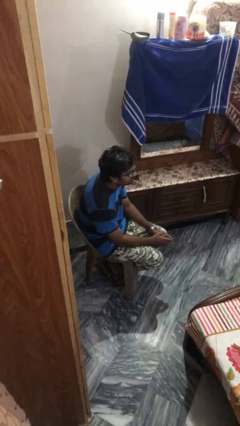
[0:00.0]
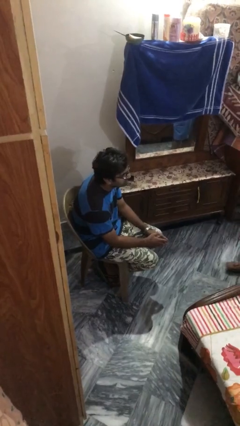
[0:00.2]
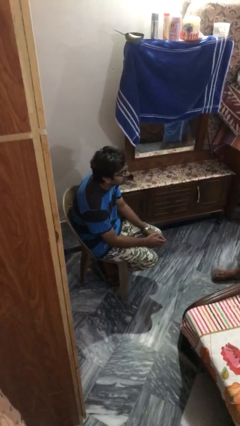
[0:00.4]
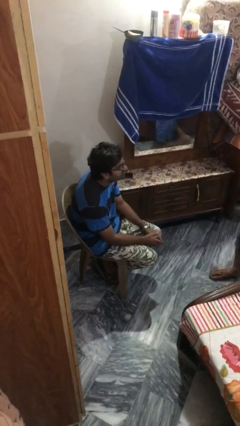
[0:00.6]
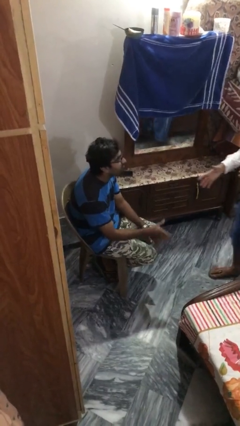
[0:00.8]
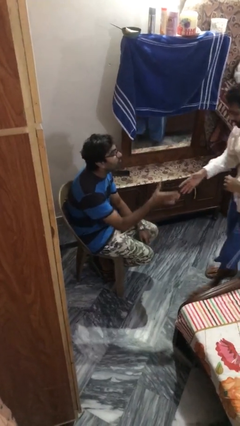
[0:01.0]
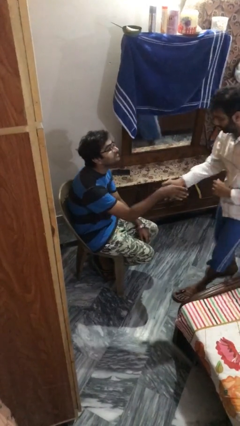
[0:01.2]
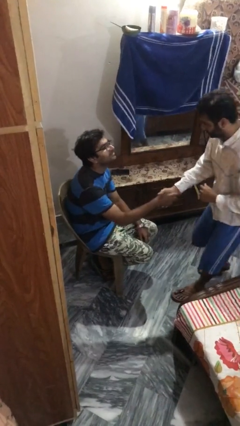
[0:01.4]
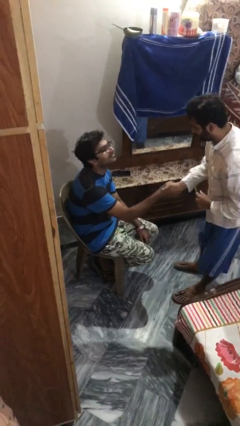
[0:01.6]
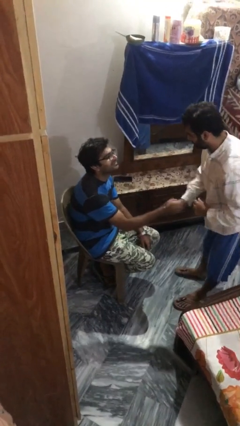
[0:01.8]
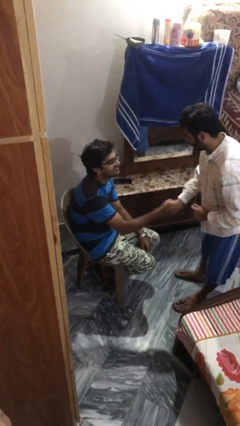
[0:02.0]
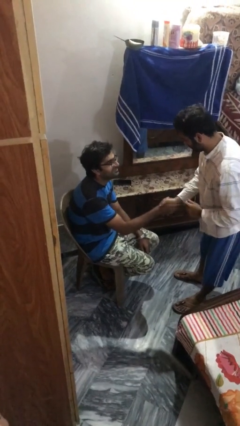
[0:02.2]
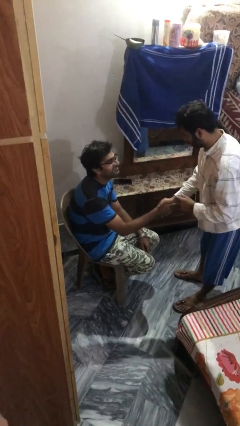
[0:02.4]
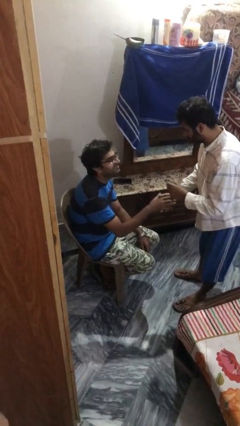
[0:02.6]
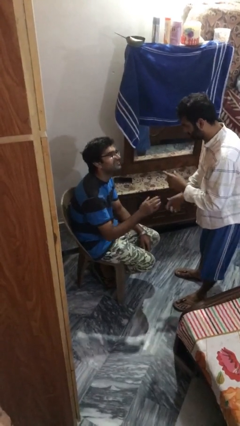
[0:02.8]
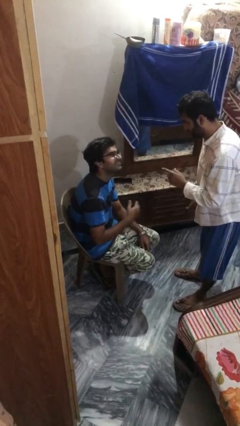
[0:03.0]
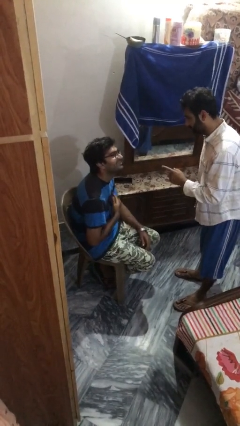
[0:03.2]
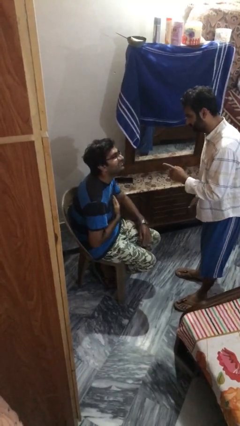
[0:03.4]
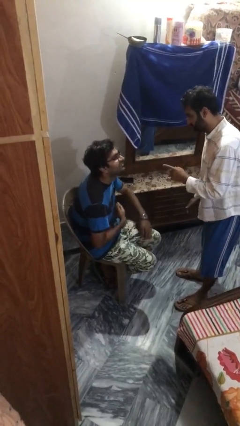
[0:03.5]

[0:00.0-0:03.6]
person shakes hand

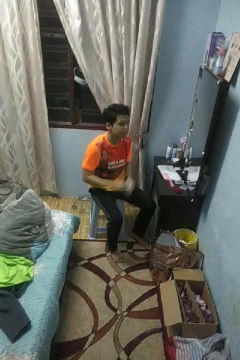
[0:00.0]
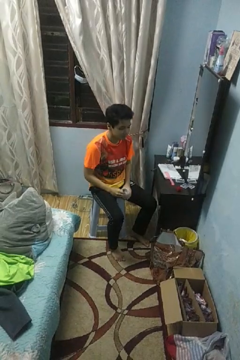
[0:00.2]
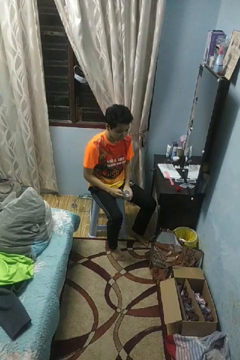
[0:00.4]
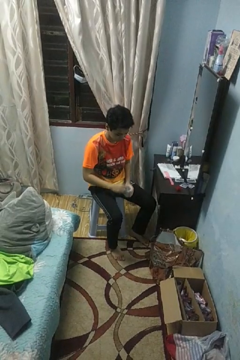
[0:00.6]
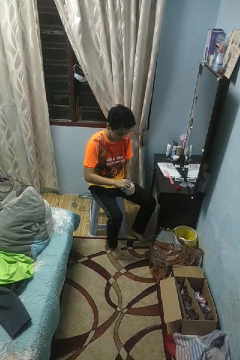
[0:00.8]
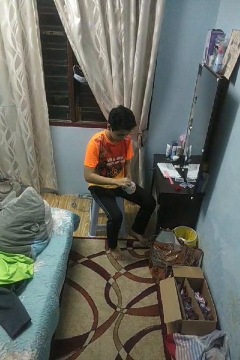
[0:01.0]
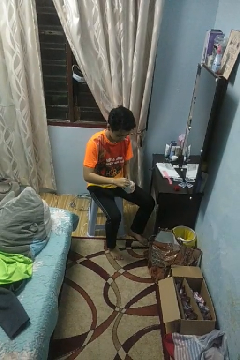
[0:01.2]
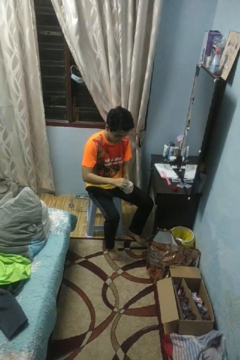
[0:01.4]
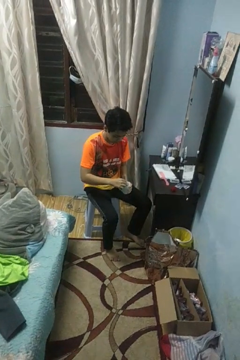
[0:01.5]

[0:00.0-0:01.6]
person stirs mug

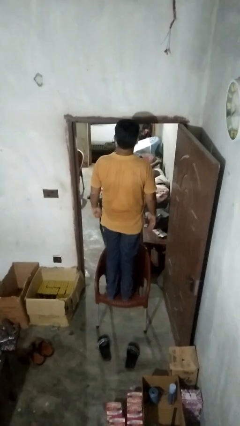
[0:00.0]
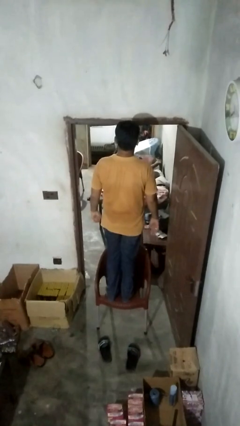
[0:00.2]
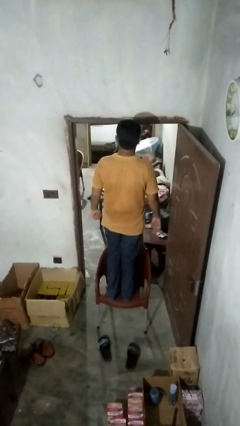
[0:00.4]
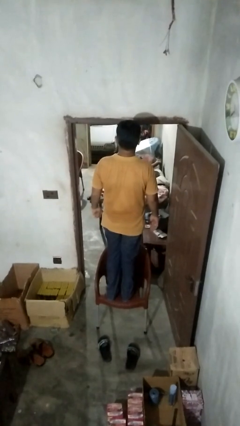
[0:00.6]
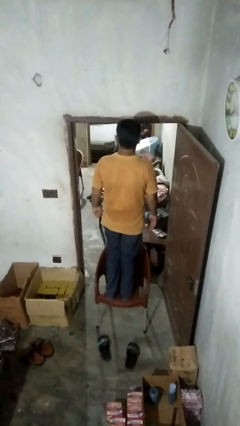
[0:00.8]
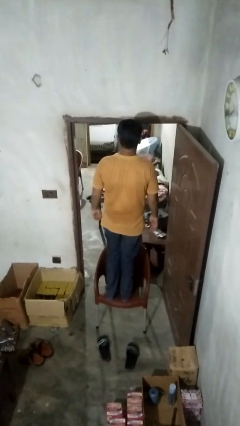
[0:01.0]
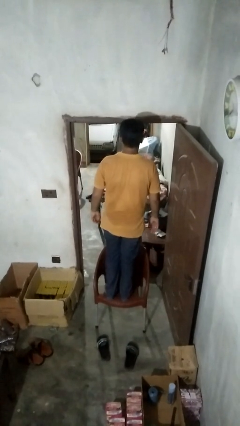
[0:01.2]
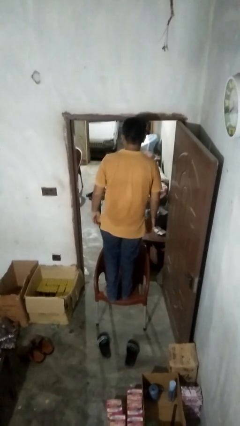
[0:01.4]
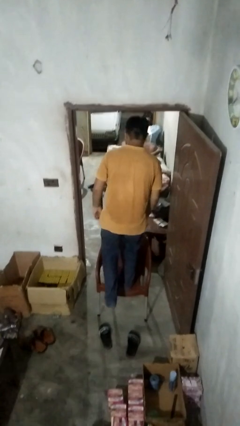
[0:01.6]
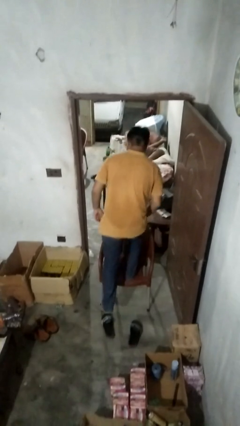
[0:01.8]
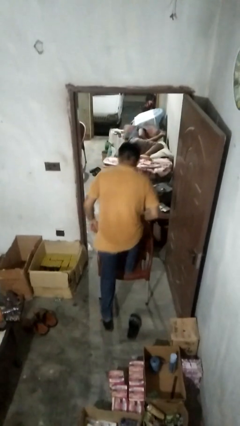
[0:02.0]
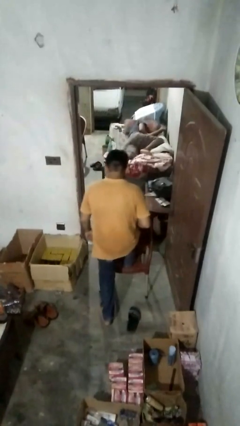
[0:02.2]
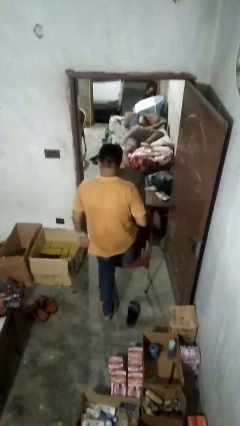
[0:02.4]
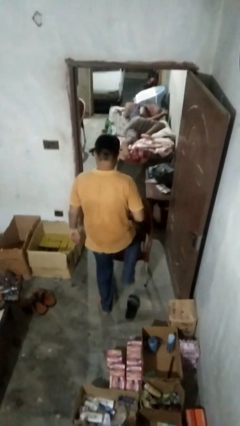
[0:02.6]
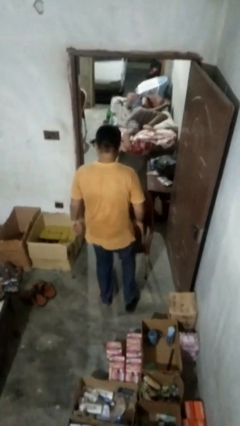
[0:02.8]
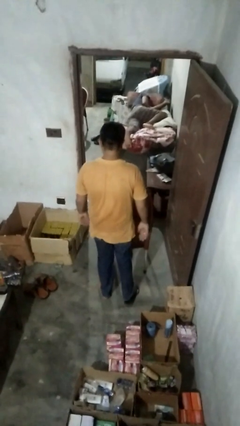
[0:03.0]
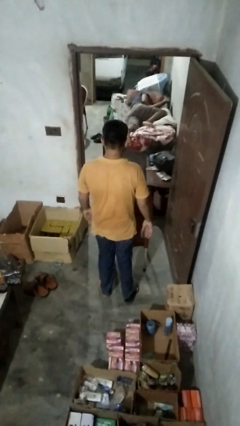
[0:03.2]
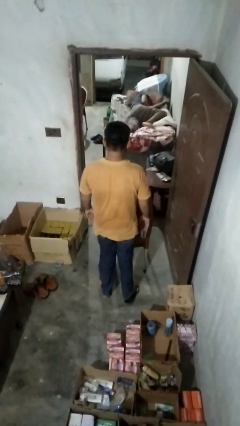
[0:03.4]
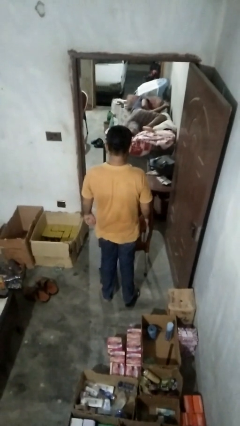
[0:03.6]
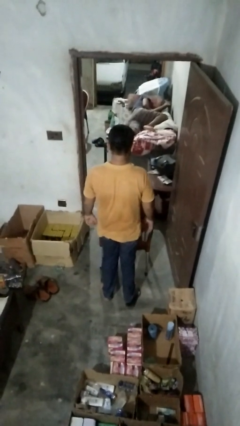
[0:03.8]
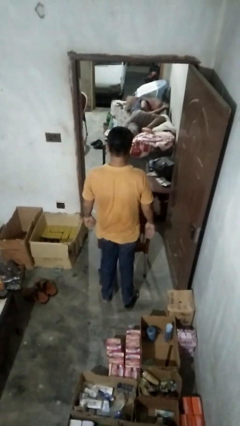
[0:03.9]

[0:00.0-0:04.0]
person climbs off chair

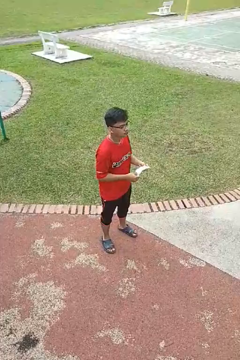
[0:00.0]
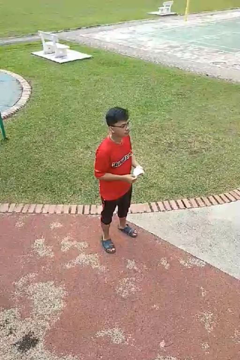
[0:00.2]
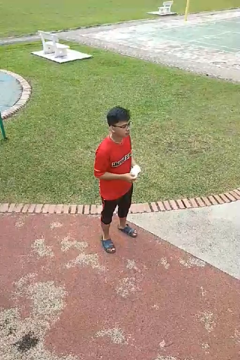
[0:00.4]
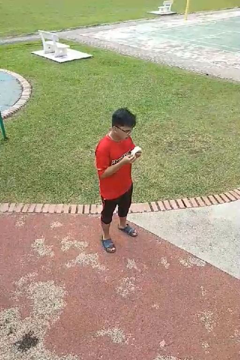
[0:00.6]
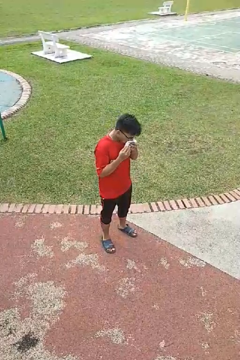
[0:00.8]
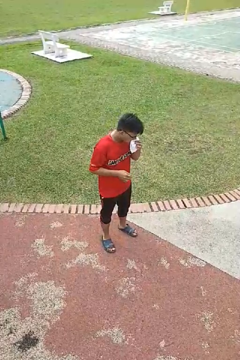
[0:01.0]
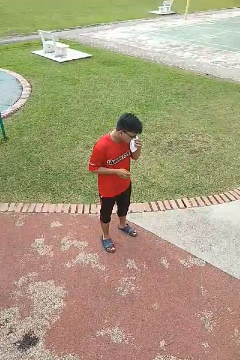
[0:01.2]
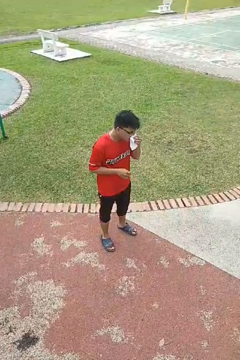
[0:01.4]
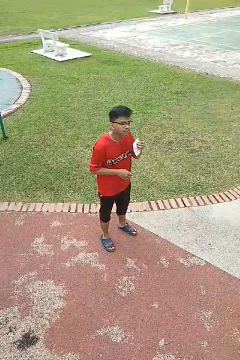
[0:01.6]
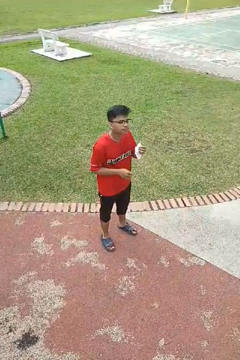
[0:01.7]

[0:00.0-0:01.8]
person blows nose

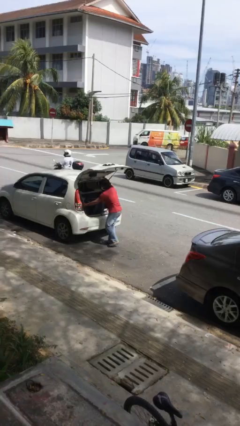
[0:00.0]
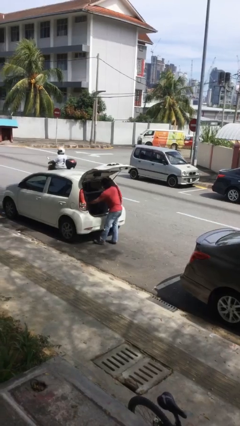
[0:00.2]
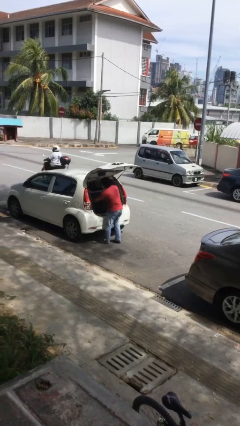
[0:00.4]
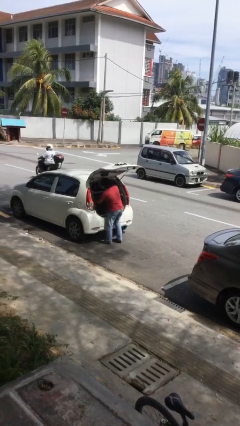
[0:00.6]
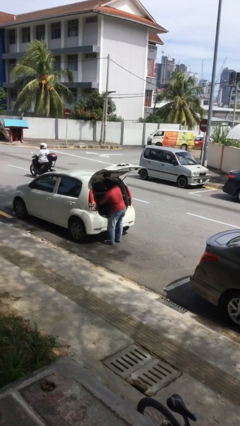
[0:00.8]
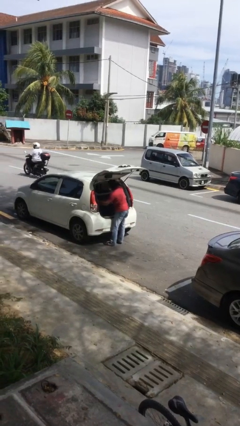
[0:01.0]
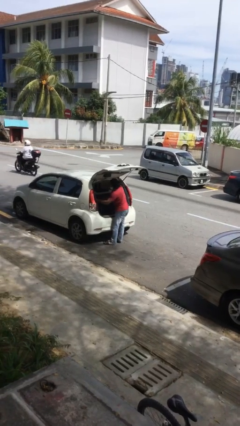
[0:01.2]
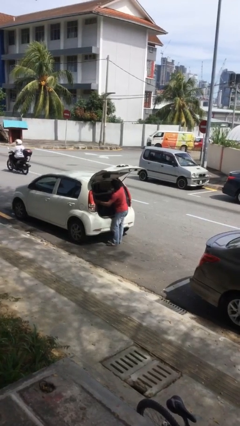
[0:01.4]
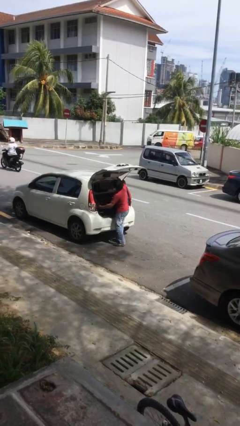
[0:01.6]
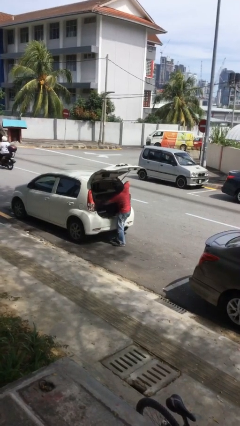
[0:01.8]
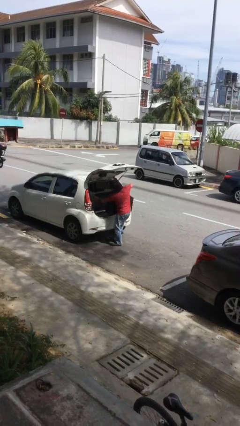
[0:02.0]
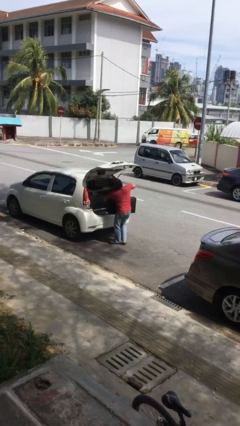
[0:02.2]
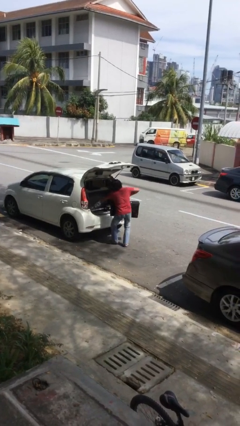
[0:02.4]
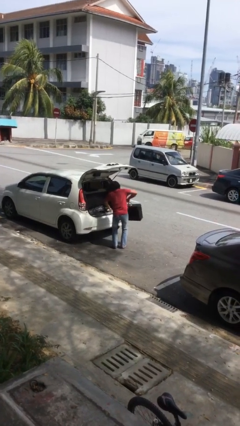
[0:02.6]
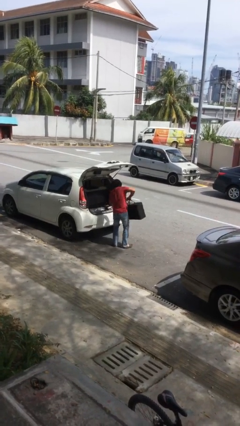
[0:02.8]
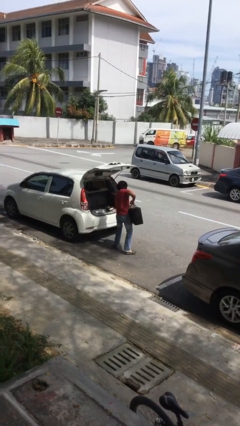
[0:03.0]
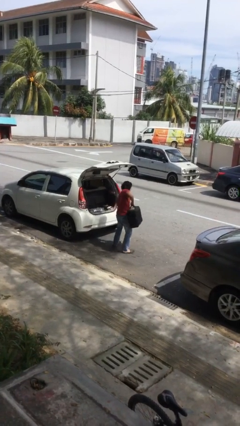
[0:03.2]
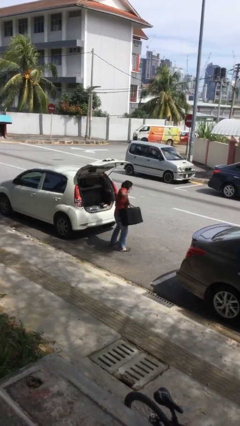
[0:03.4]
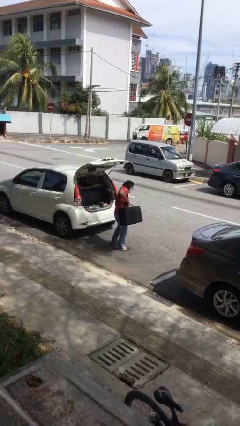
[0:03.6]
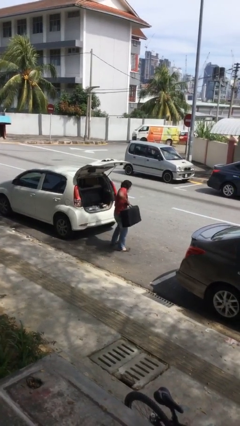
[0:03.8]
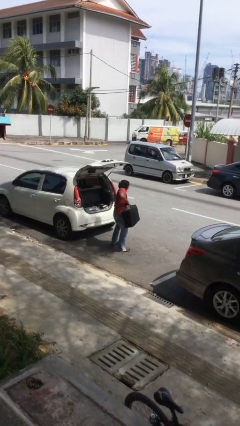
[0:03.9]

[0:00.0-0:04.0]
person unloads car

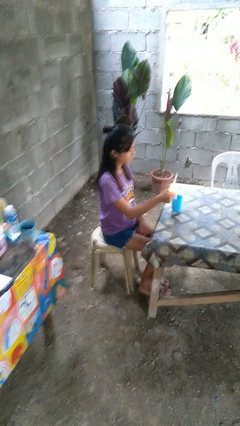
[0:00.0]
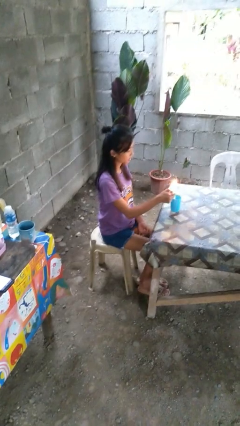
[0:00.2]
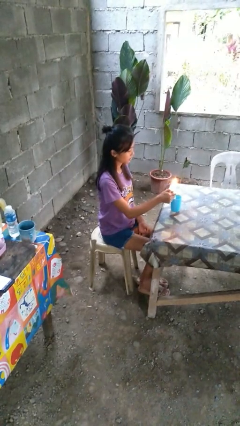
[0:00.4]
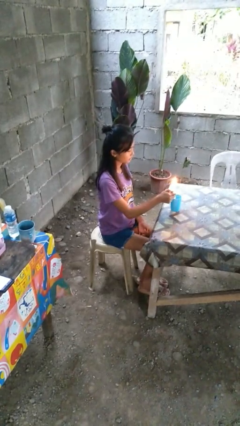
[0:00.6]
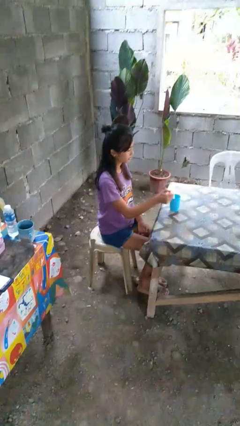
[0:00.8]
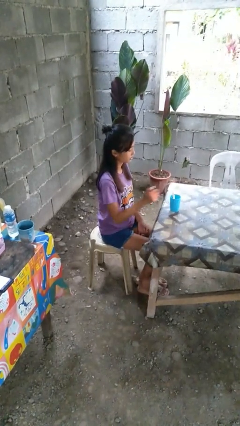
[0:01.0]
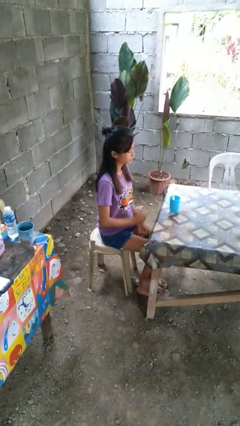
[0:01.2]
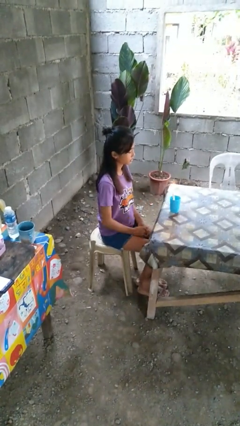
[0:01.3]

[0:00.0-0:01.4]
person lights candle

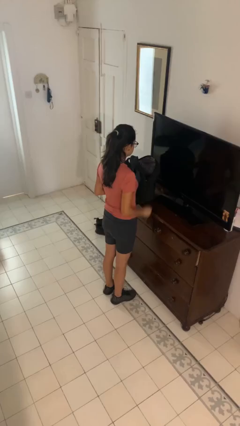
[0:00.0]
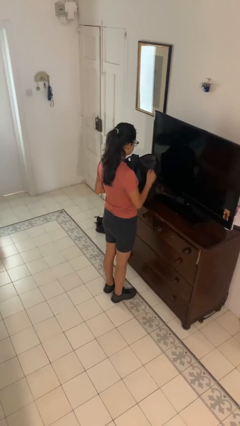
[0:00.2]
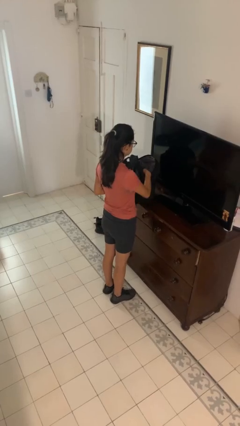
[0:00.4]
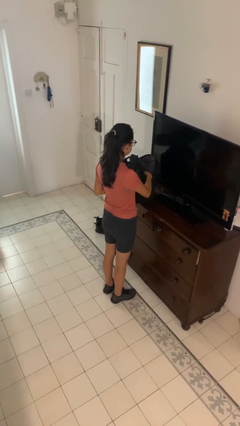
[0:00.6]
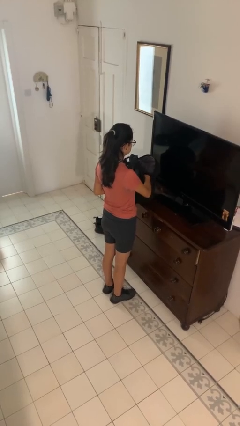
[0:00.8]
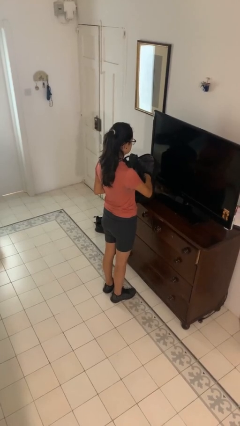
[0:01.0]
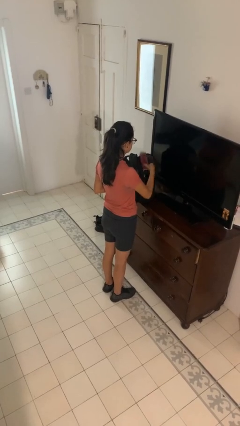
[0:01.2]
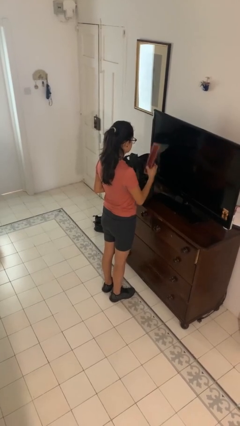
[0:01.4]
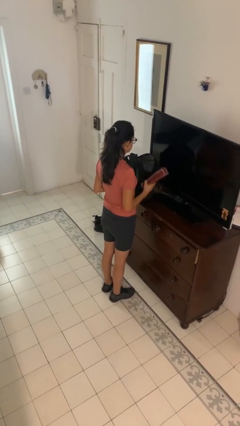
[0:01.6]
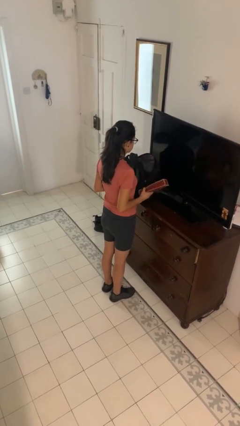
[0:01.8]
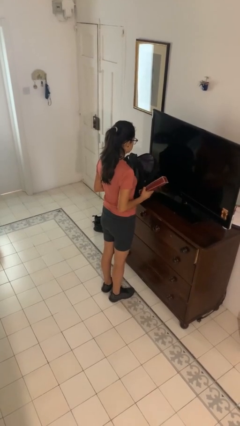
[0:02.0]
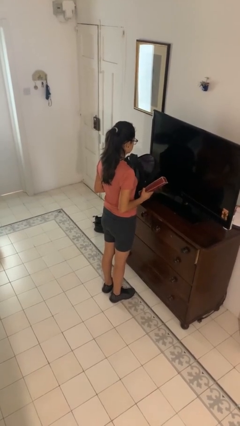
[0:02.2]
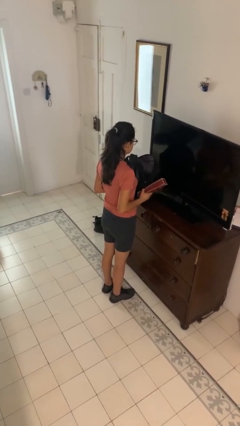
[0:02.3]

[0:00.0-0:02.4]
person takes object from bag
